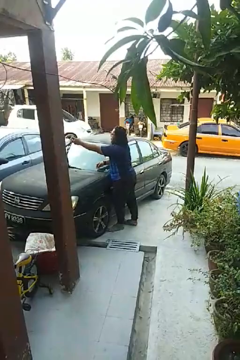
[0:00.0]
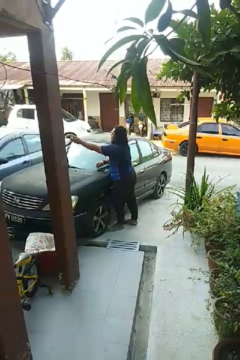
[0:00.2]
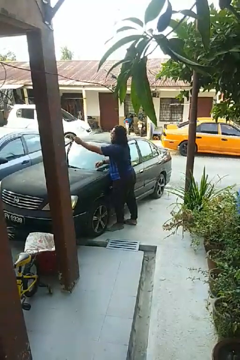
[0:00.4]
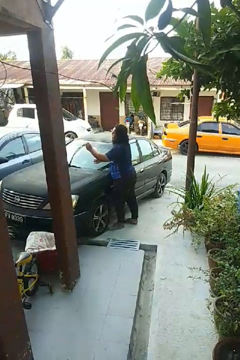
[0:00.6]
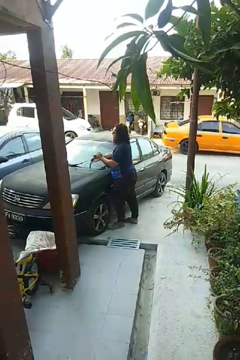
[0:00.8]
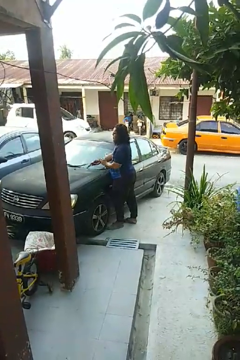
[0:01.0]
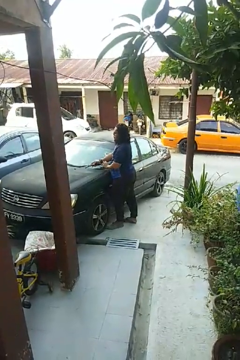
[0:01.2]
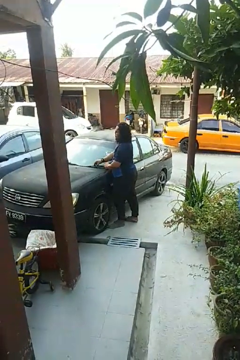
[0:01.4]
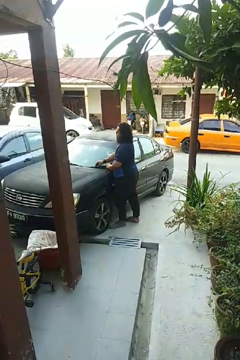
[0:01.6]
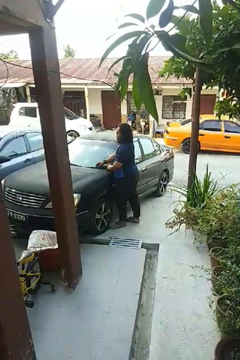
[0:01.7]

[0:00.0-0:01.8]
person flips down car wipers

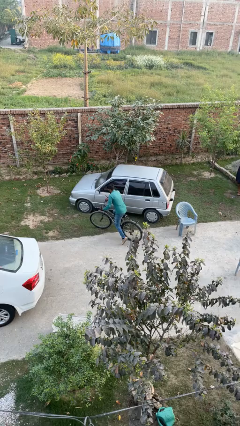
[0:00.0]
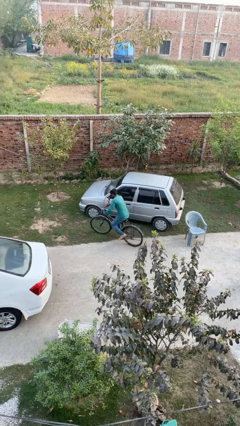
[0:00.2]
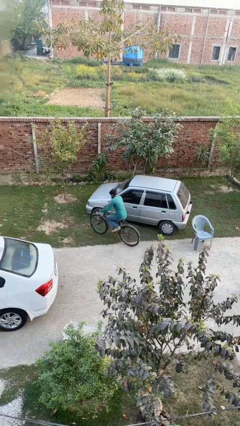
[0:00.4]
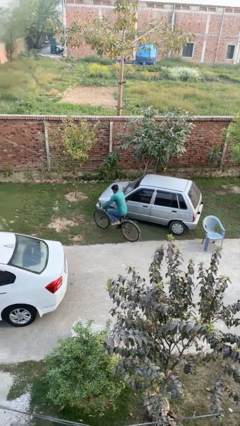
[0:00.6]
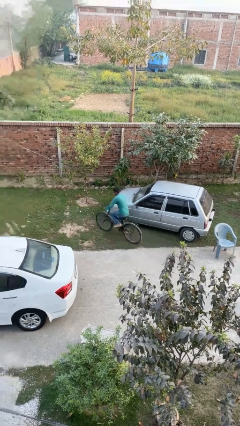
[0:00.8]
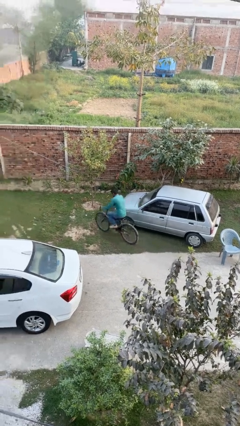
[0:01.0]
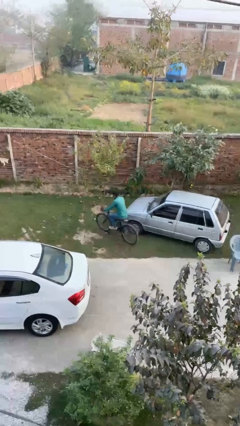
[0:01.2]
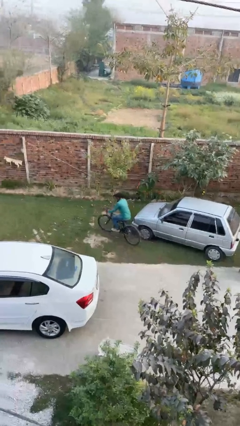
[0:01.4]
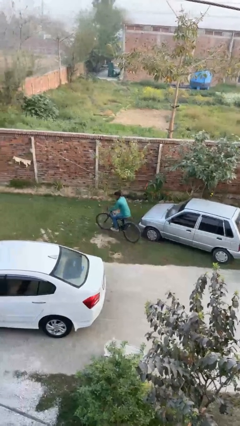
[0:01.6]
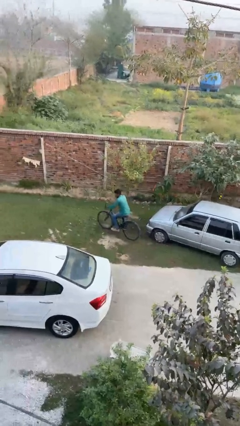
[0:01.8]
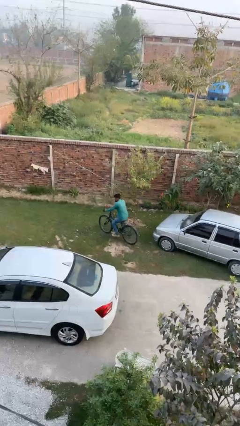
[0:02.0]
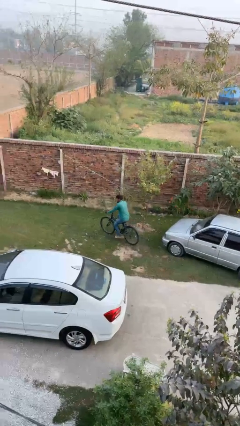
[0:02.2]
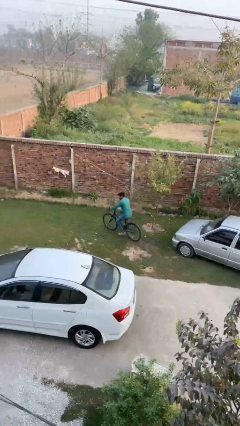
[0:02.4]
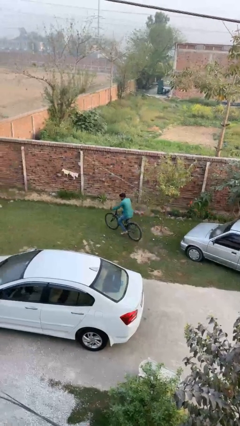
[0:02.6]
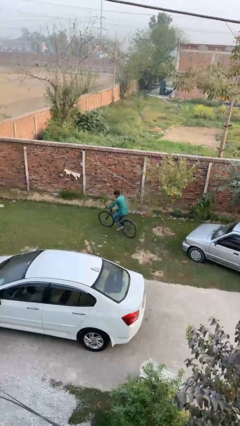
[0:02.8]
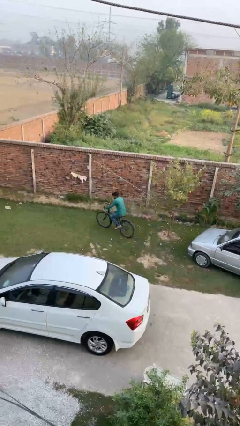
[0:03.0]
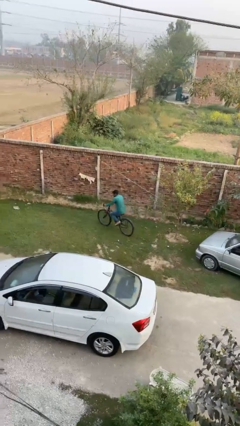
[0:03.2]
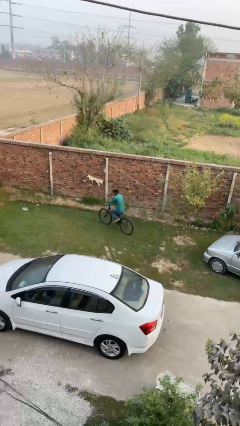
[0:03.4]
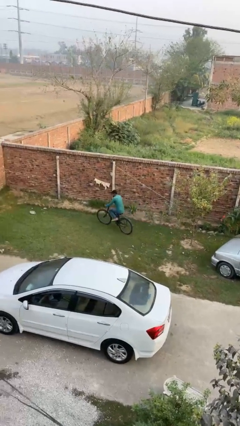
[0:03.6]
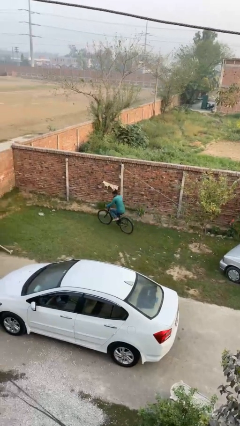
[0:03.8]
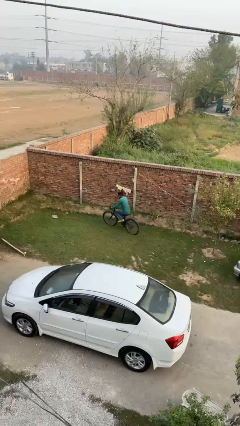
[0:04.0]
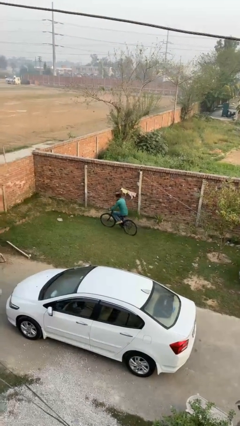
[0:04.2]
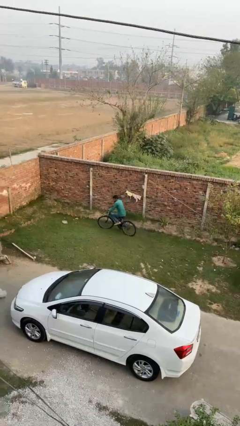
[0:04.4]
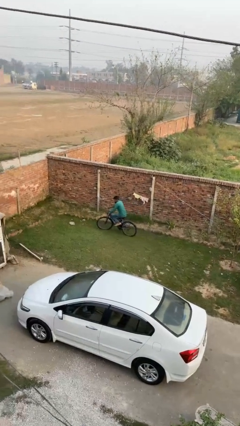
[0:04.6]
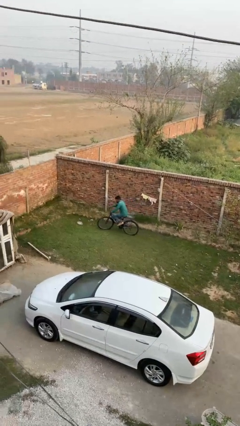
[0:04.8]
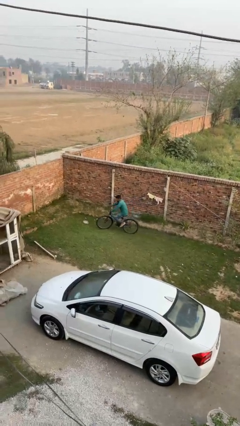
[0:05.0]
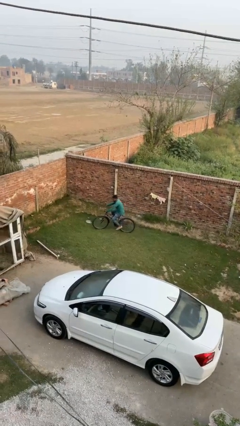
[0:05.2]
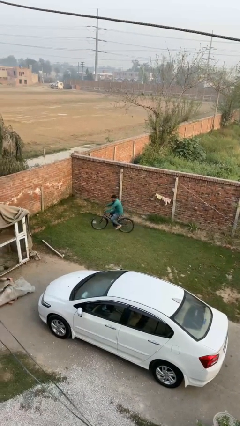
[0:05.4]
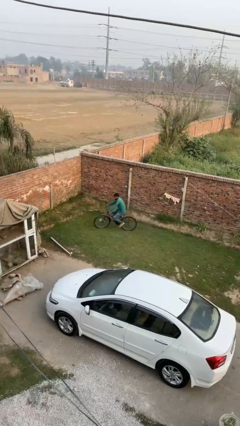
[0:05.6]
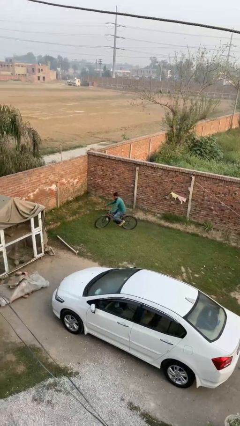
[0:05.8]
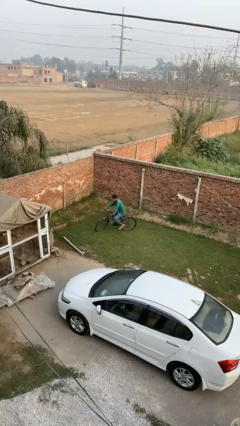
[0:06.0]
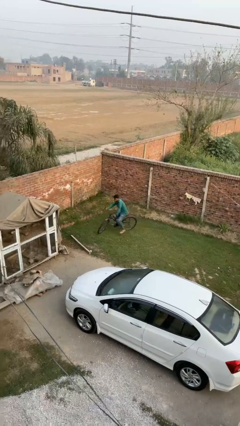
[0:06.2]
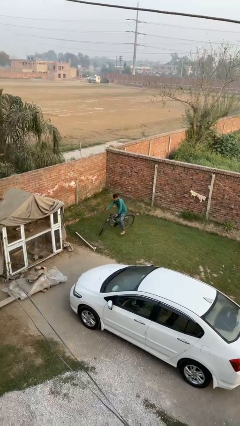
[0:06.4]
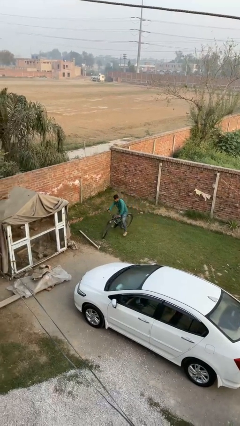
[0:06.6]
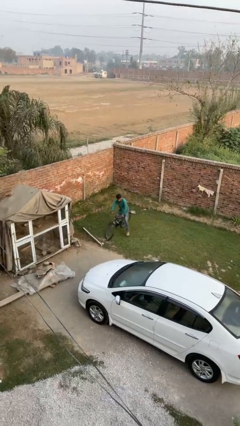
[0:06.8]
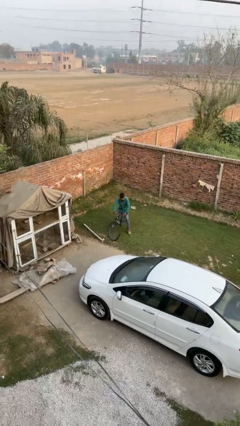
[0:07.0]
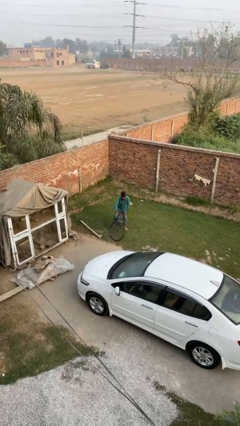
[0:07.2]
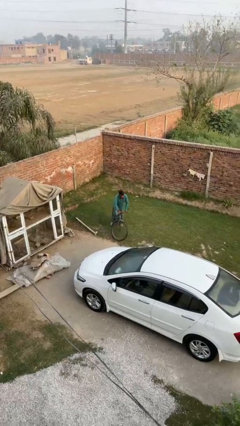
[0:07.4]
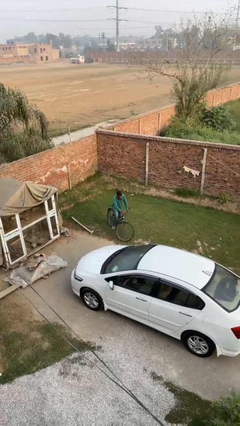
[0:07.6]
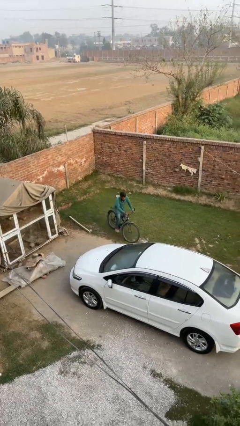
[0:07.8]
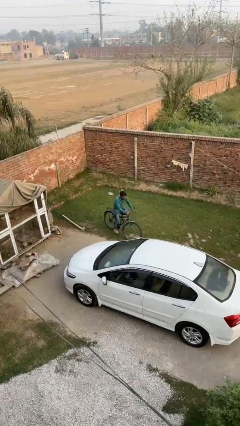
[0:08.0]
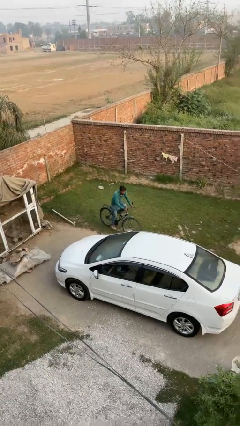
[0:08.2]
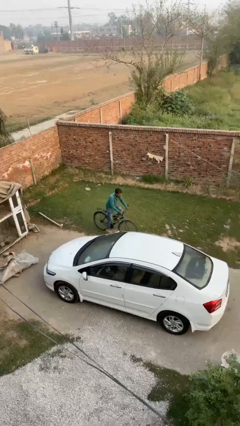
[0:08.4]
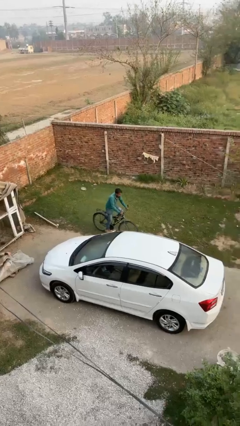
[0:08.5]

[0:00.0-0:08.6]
person rides bicycle

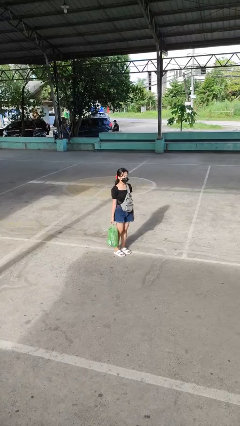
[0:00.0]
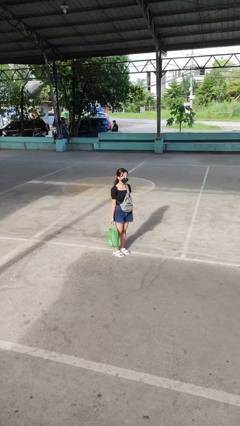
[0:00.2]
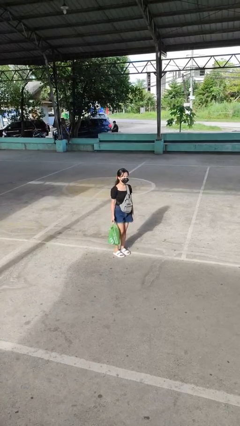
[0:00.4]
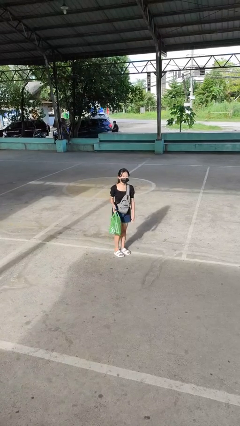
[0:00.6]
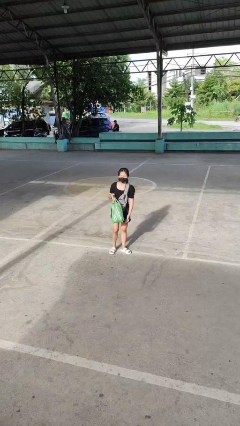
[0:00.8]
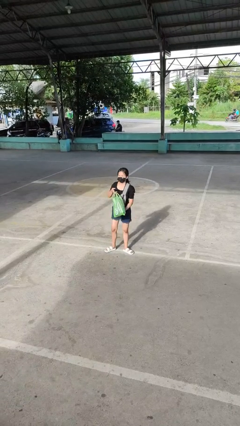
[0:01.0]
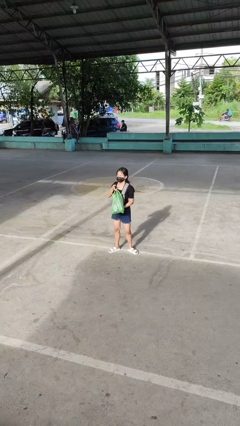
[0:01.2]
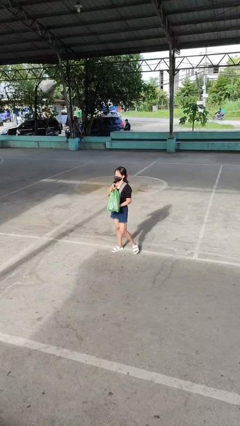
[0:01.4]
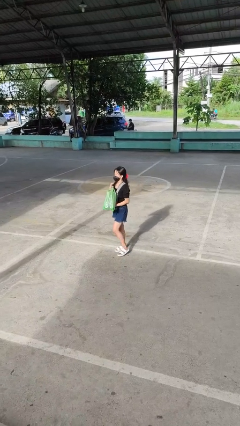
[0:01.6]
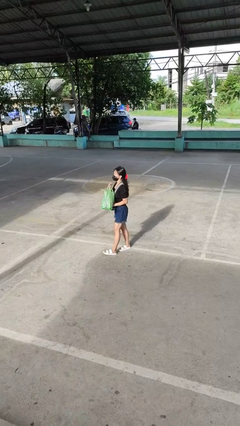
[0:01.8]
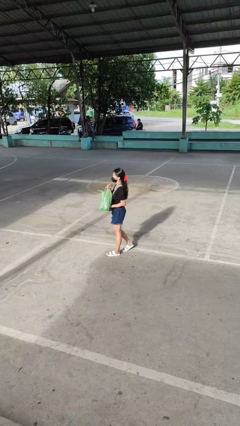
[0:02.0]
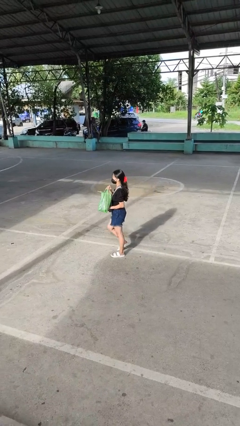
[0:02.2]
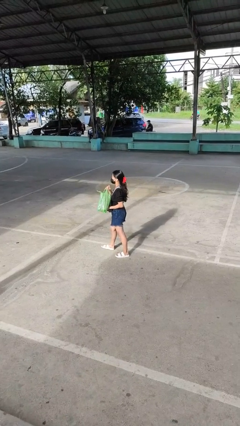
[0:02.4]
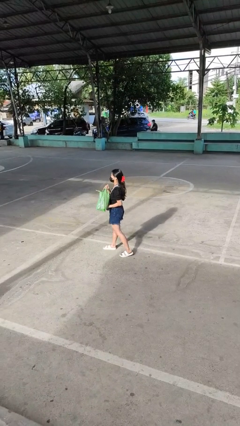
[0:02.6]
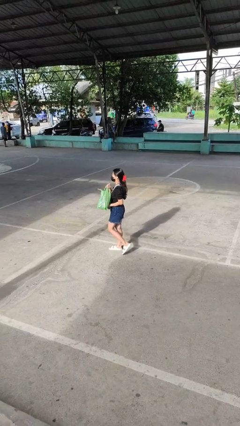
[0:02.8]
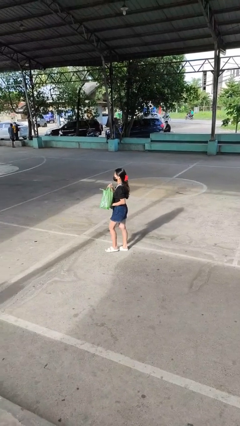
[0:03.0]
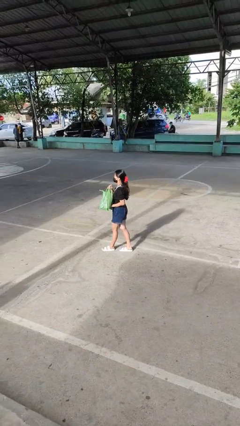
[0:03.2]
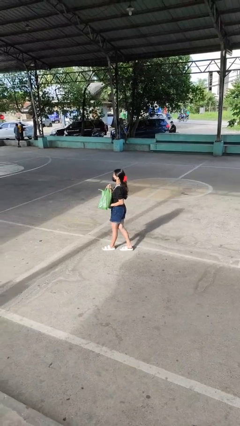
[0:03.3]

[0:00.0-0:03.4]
person carries groceries

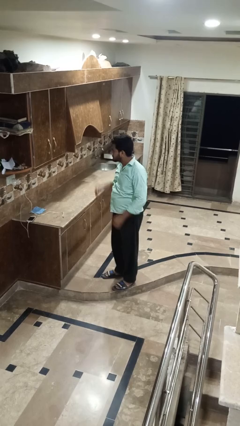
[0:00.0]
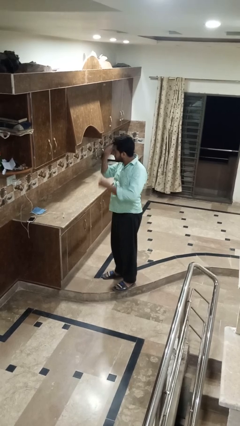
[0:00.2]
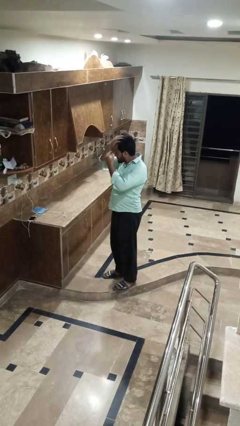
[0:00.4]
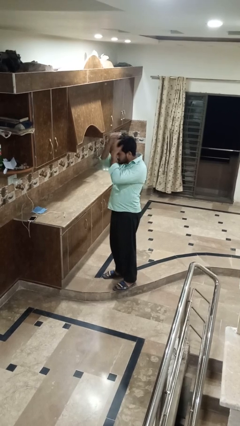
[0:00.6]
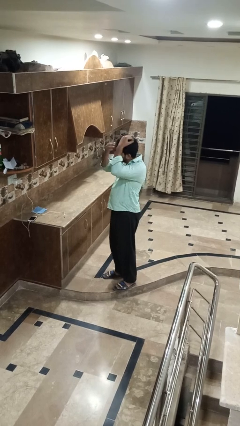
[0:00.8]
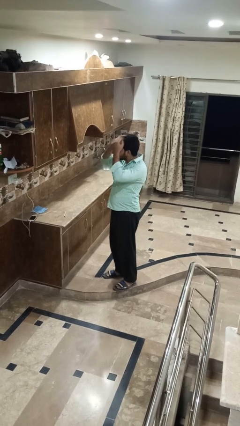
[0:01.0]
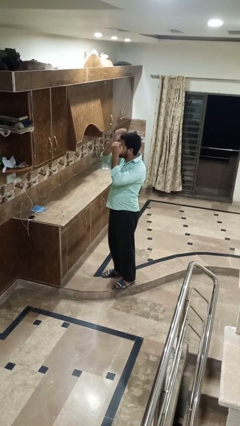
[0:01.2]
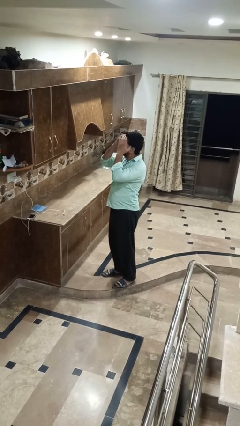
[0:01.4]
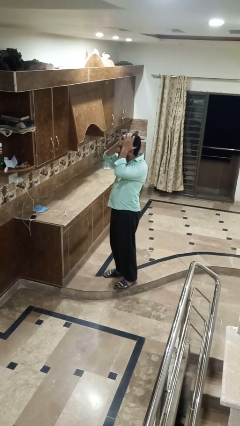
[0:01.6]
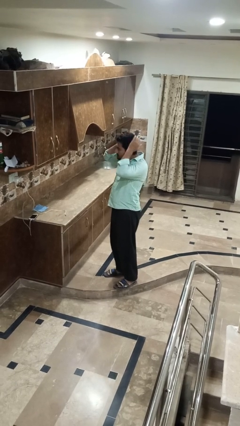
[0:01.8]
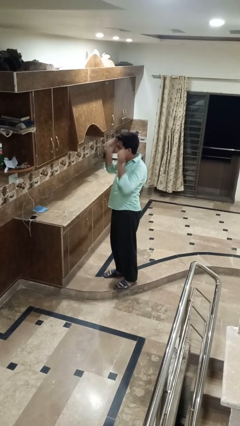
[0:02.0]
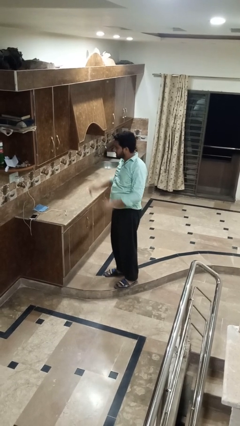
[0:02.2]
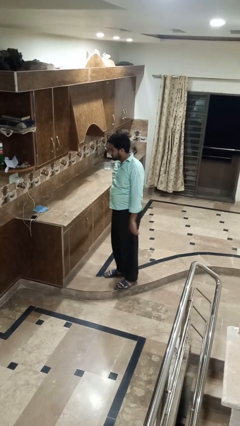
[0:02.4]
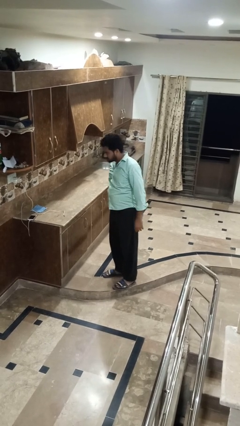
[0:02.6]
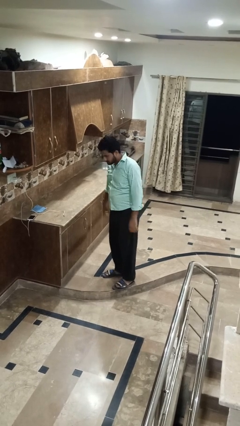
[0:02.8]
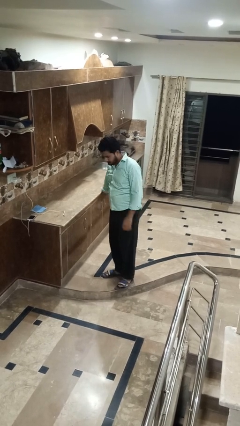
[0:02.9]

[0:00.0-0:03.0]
person strokes hair

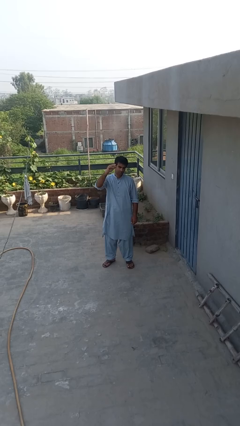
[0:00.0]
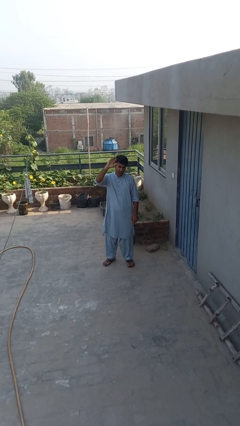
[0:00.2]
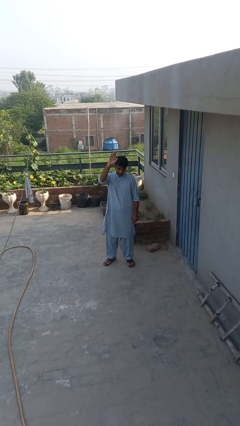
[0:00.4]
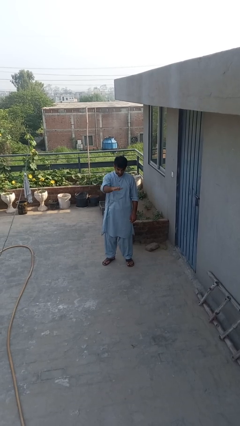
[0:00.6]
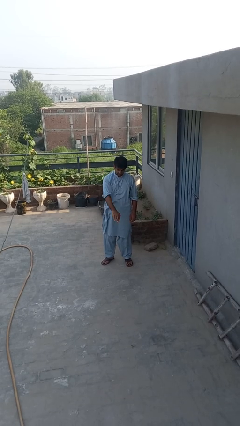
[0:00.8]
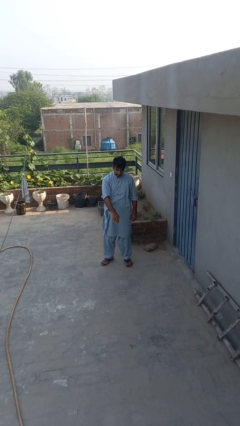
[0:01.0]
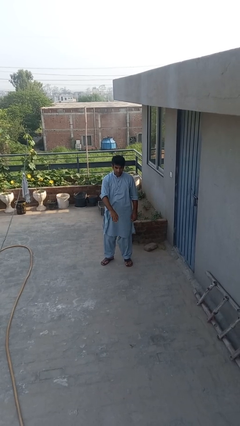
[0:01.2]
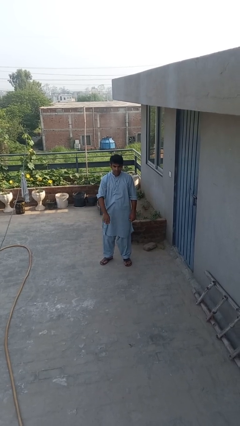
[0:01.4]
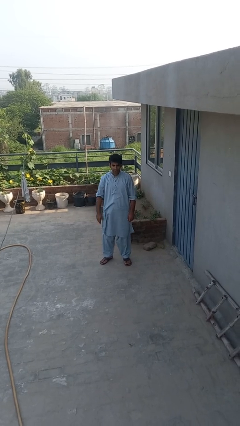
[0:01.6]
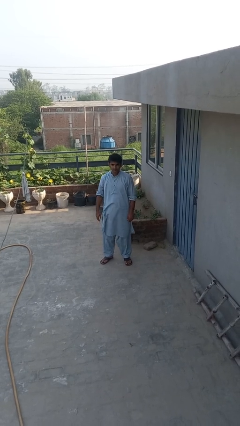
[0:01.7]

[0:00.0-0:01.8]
person gestures swipe down
